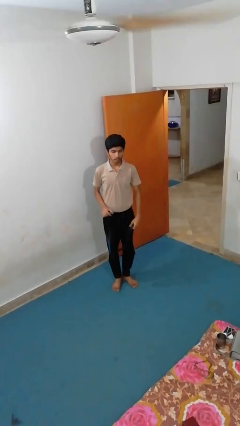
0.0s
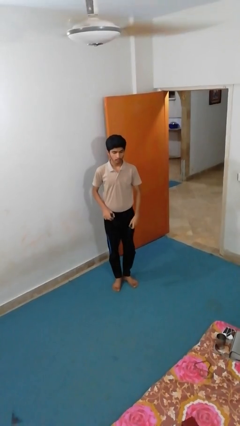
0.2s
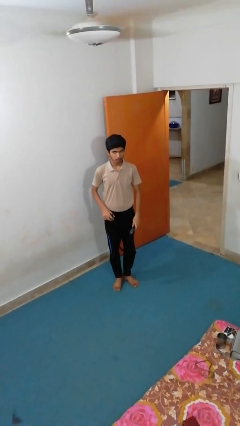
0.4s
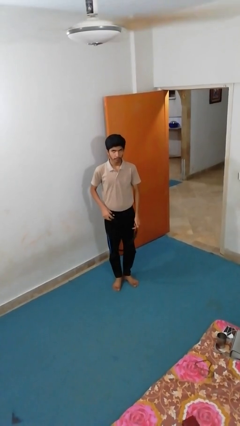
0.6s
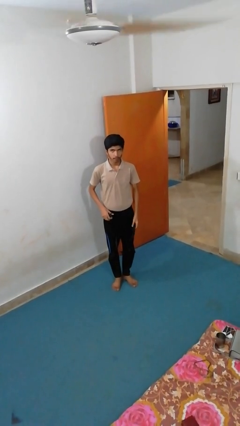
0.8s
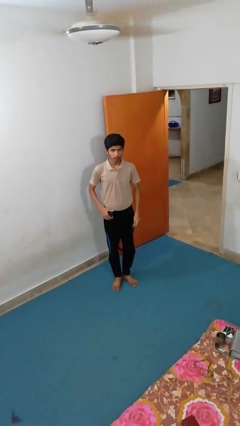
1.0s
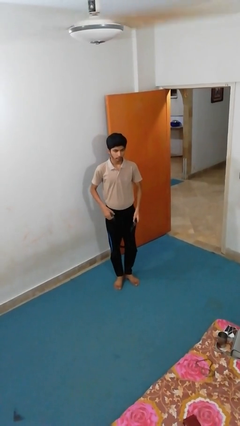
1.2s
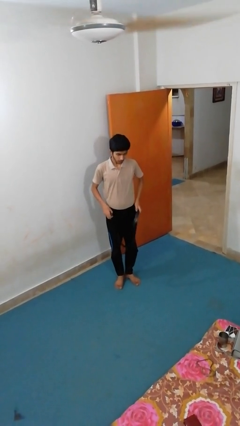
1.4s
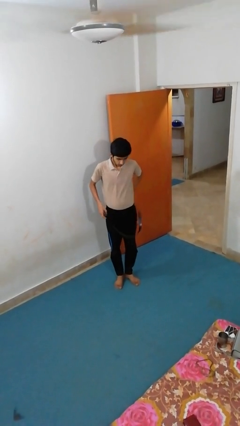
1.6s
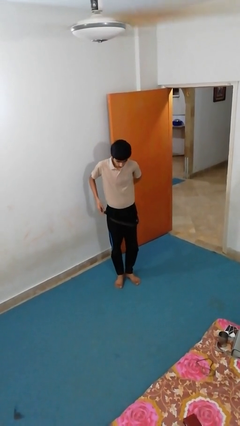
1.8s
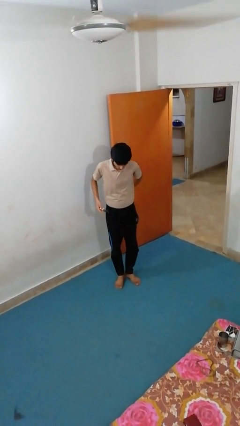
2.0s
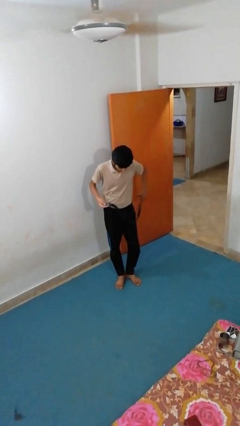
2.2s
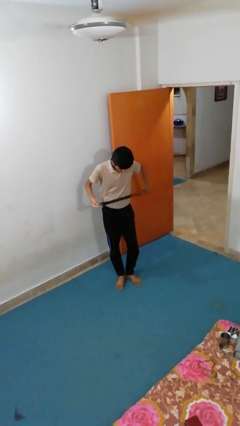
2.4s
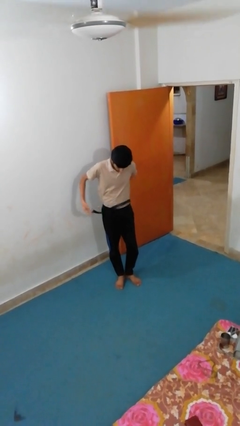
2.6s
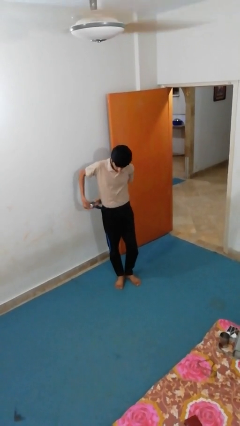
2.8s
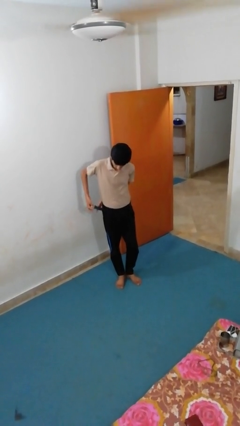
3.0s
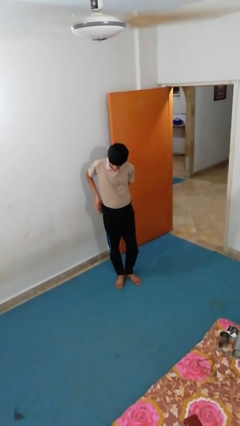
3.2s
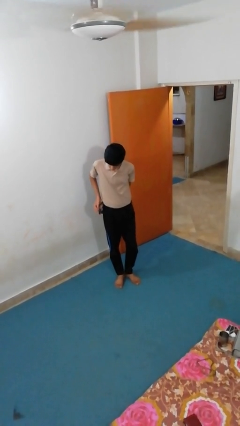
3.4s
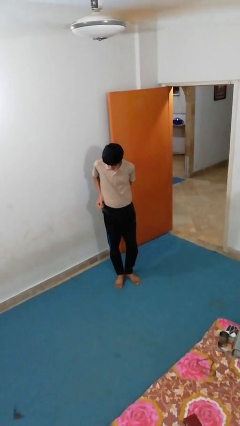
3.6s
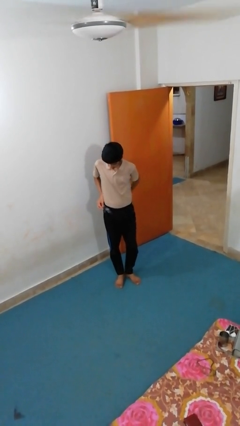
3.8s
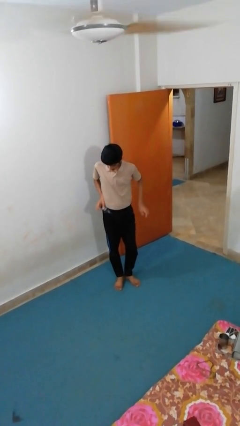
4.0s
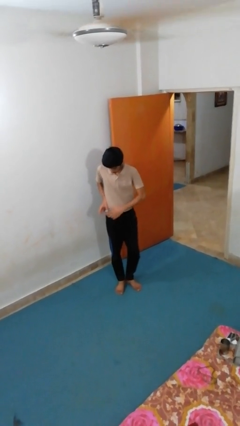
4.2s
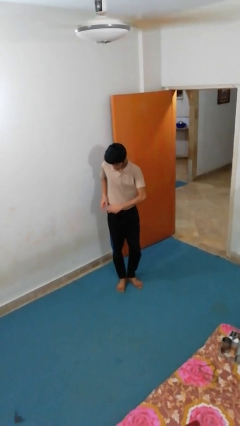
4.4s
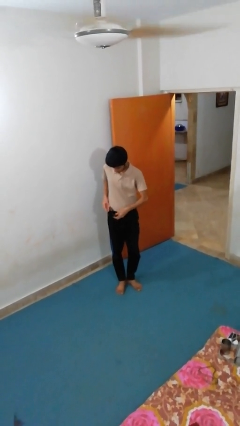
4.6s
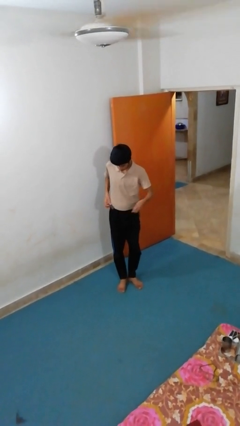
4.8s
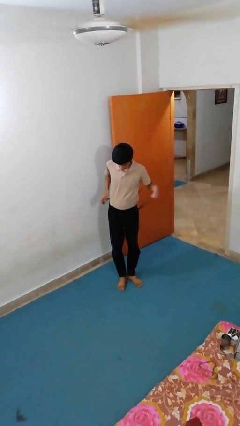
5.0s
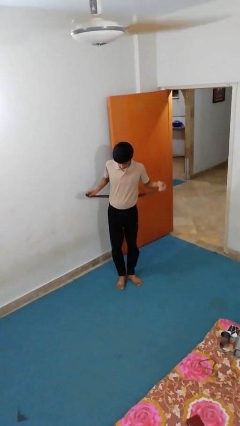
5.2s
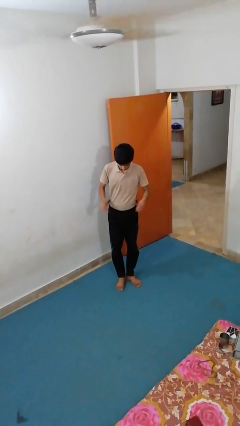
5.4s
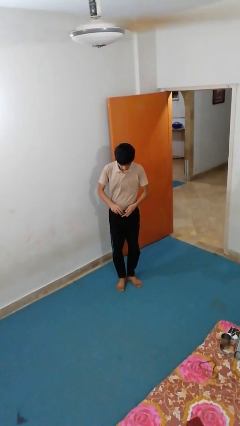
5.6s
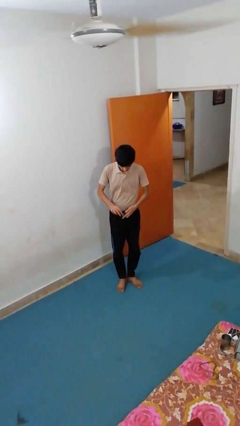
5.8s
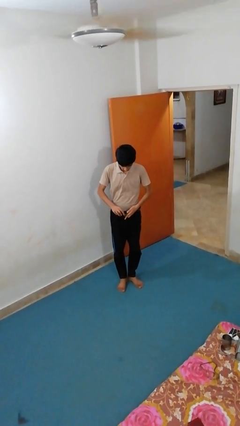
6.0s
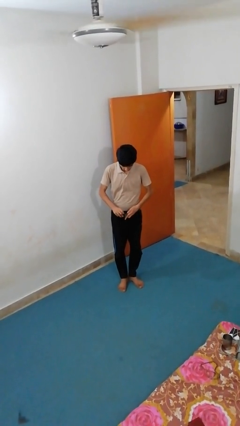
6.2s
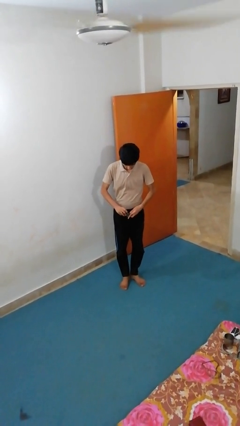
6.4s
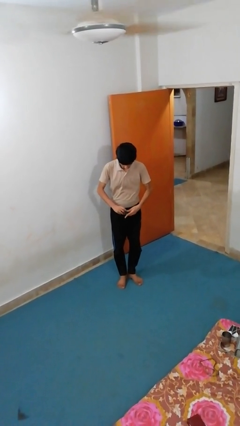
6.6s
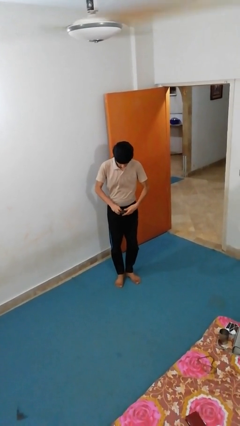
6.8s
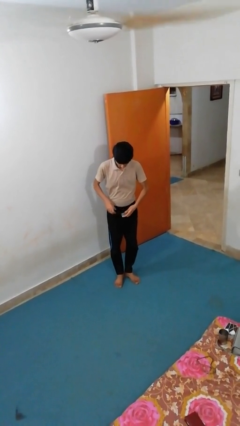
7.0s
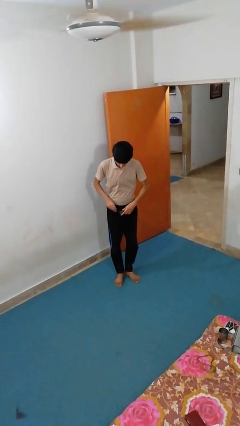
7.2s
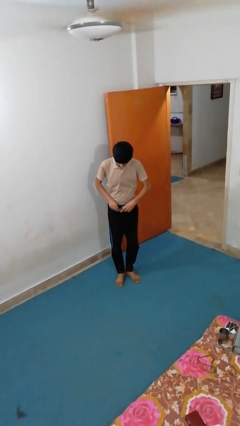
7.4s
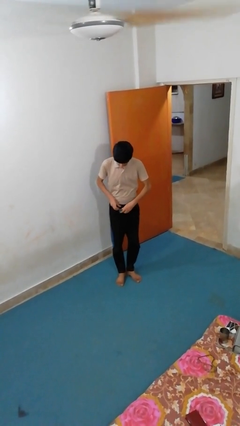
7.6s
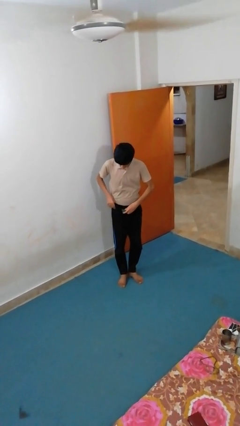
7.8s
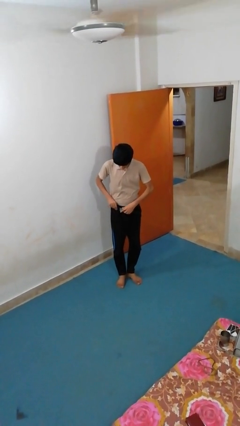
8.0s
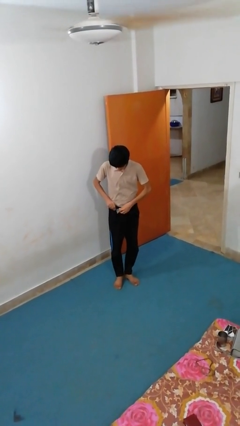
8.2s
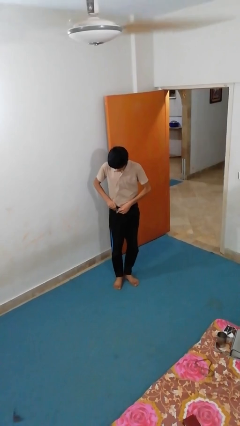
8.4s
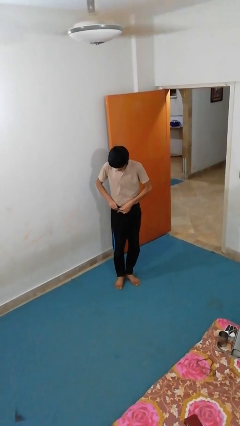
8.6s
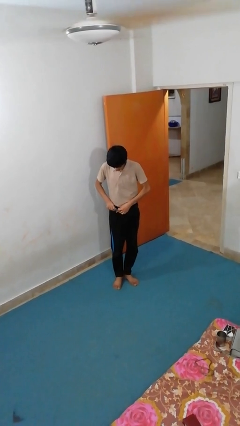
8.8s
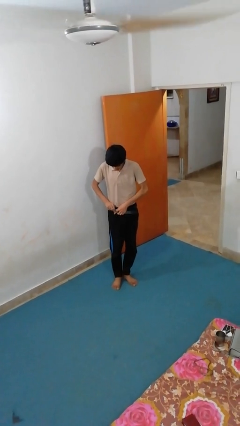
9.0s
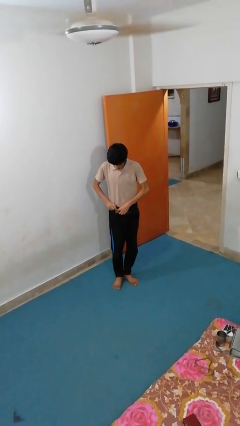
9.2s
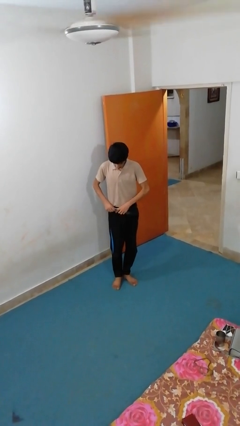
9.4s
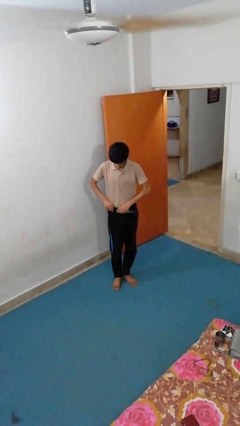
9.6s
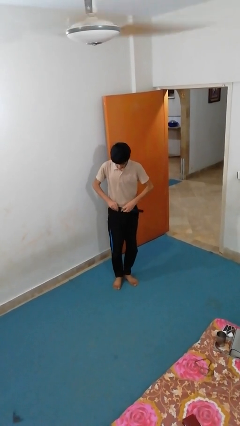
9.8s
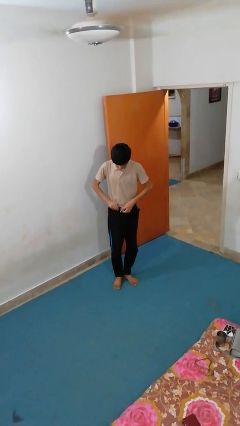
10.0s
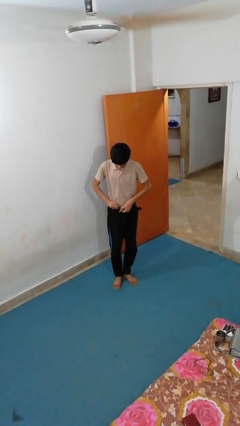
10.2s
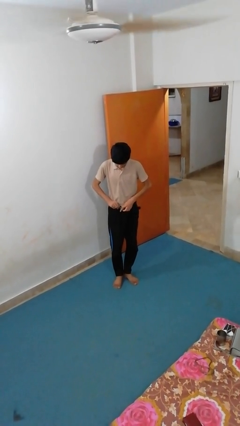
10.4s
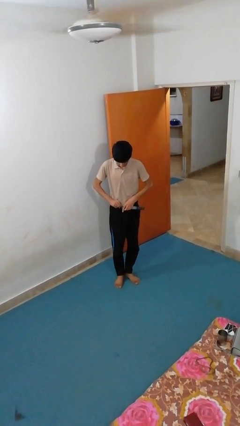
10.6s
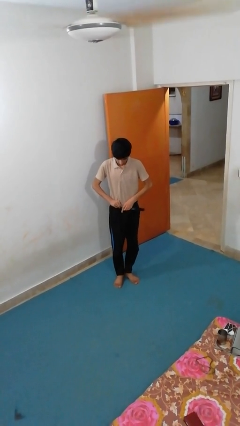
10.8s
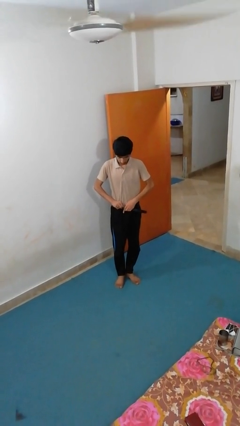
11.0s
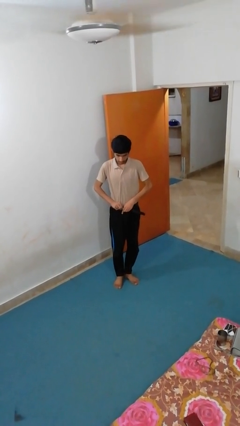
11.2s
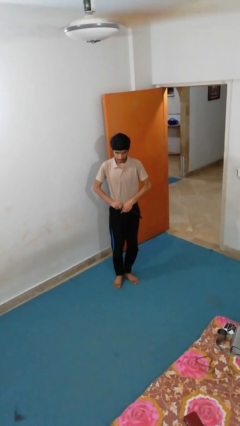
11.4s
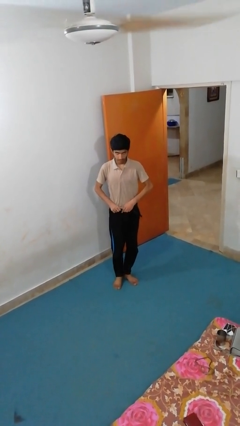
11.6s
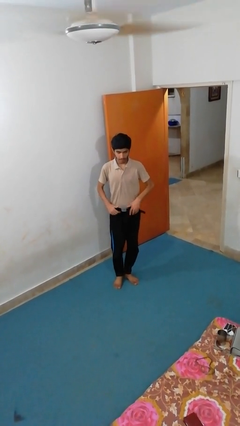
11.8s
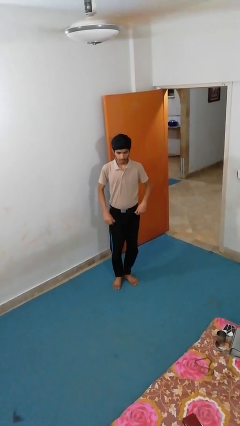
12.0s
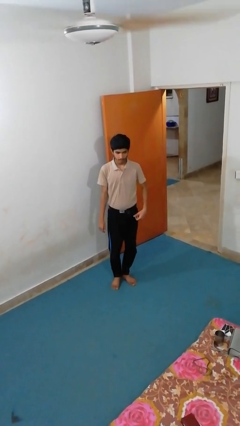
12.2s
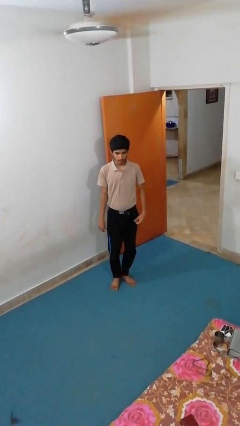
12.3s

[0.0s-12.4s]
person puts on belt

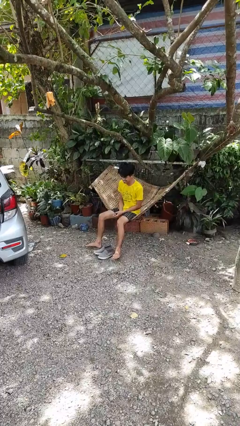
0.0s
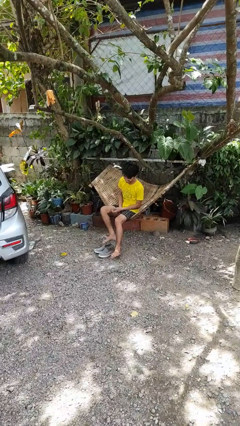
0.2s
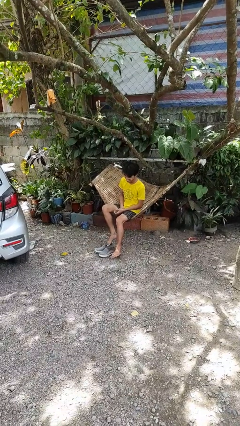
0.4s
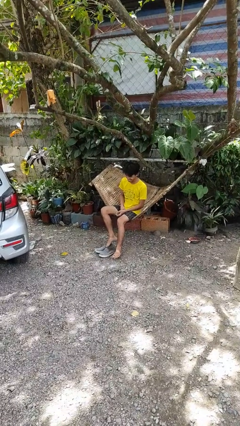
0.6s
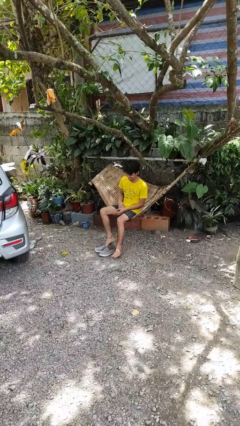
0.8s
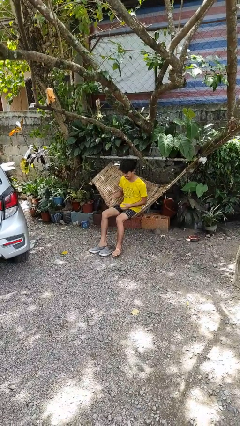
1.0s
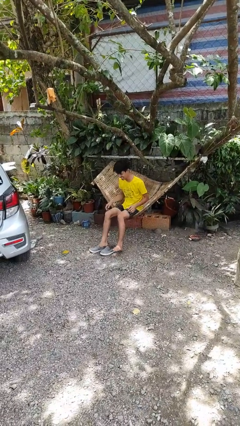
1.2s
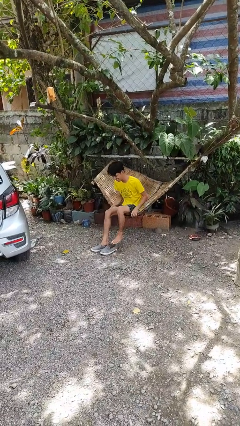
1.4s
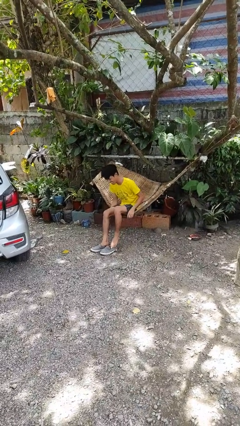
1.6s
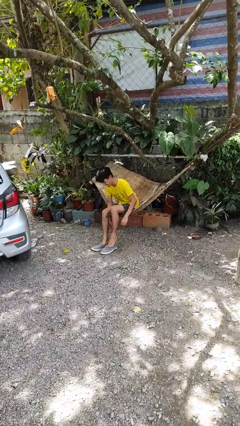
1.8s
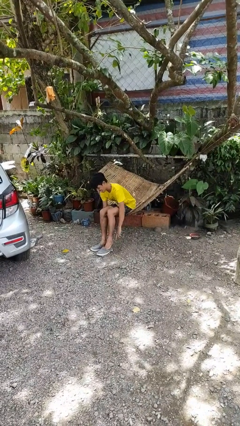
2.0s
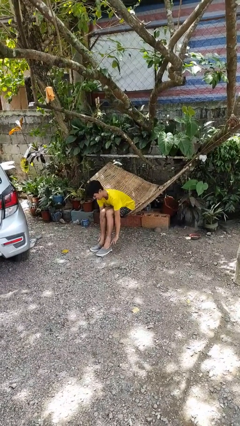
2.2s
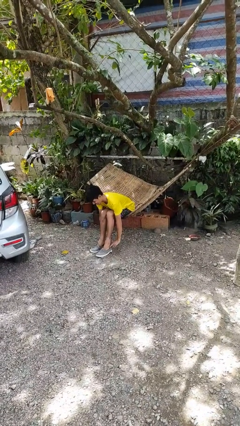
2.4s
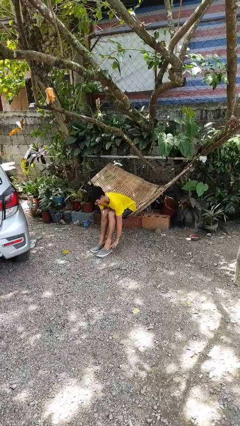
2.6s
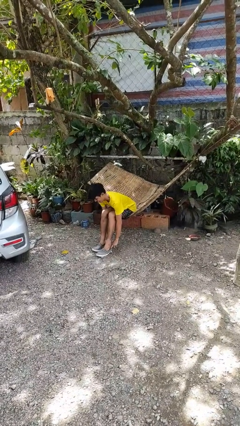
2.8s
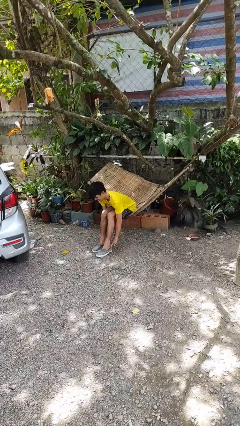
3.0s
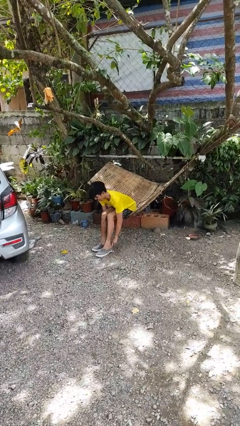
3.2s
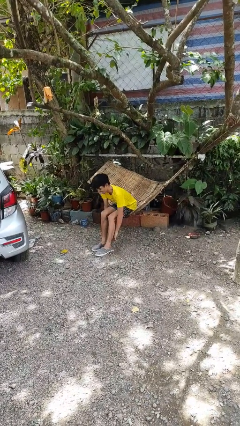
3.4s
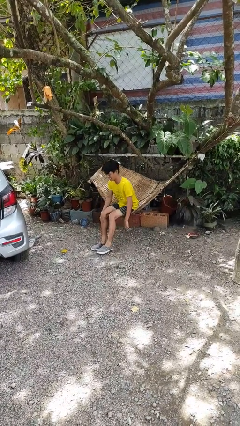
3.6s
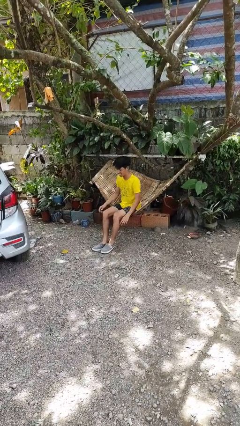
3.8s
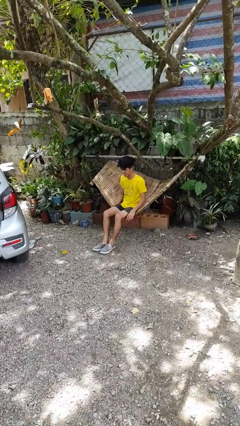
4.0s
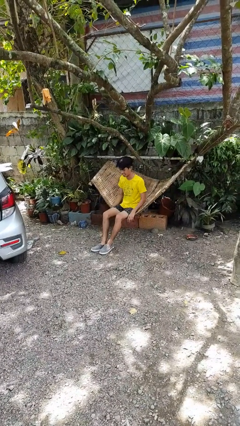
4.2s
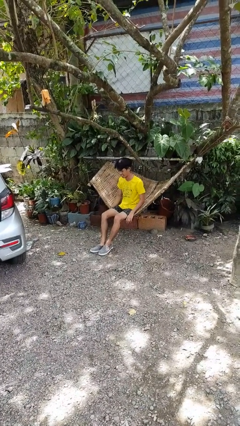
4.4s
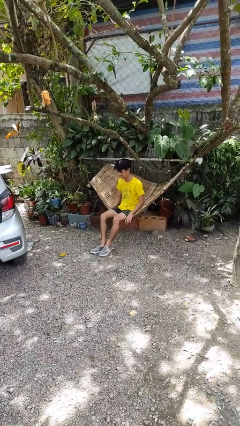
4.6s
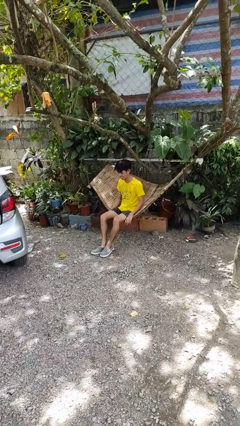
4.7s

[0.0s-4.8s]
person puts on shoes

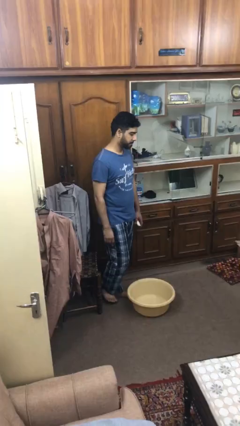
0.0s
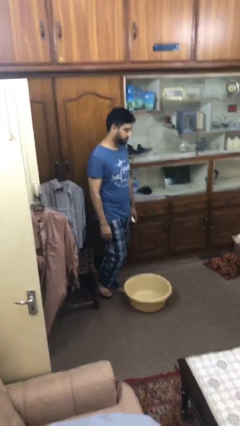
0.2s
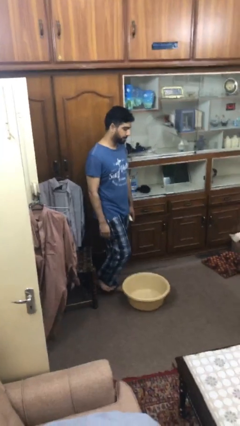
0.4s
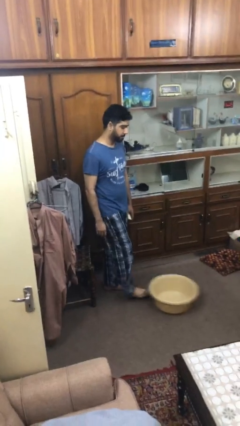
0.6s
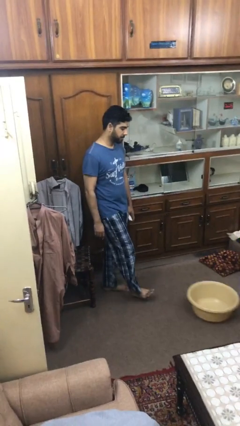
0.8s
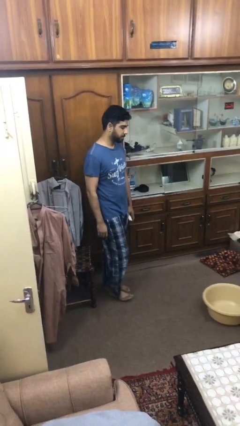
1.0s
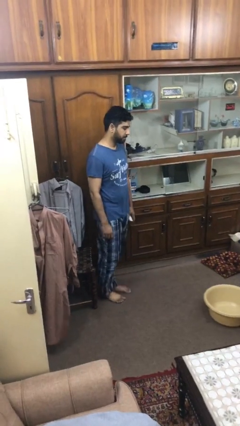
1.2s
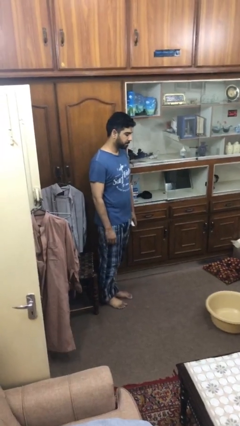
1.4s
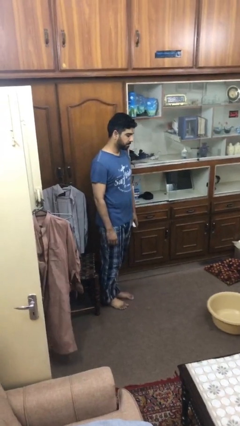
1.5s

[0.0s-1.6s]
person kicks object to person
